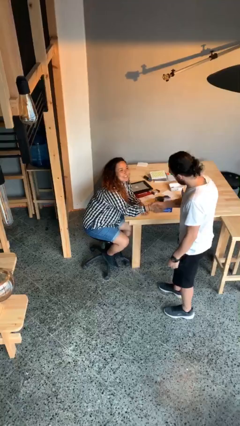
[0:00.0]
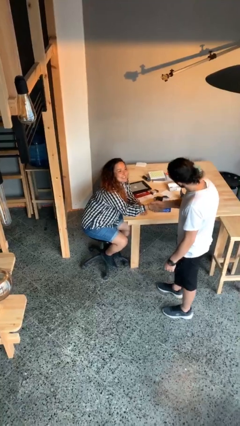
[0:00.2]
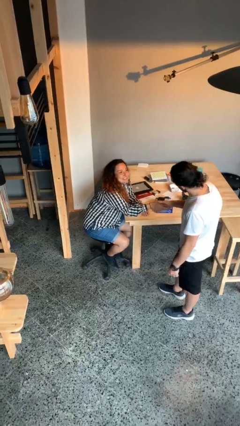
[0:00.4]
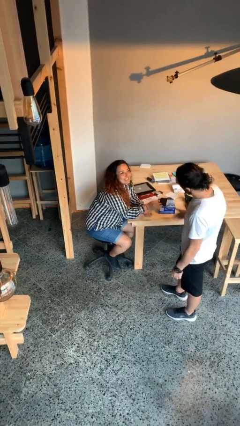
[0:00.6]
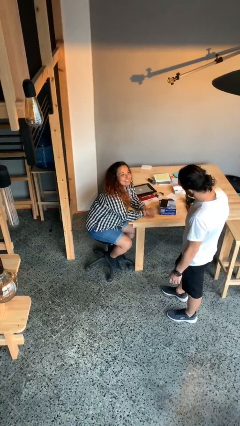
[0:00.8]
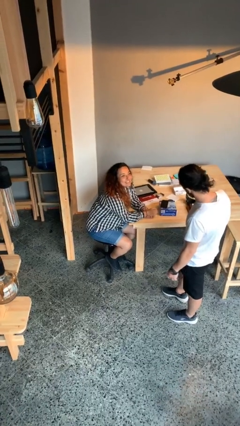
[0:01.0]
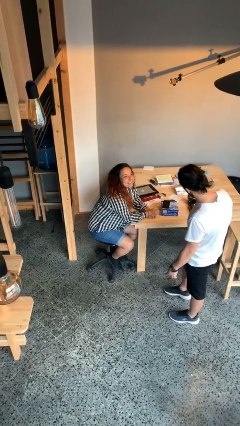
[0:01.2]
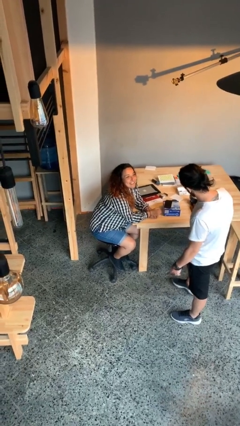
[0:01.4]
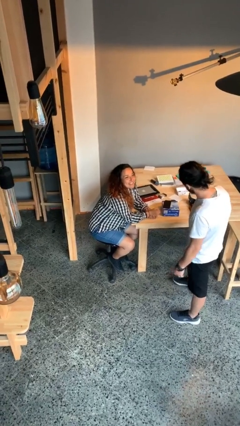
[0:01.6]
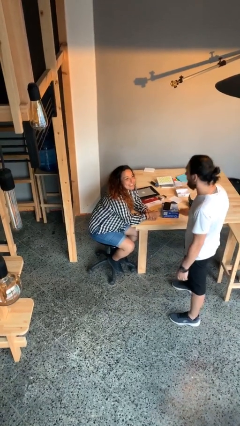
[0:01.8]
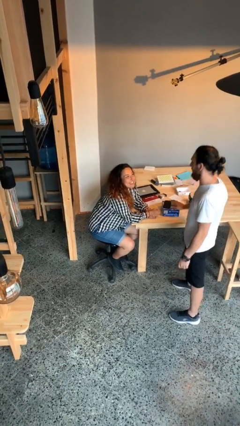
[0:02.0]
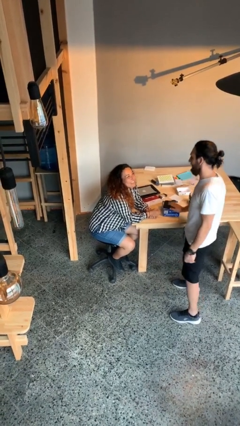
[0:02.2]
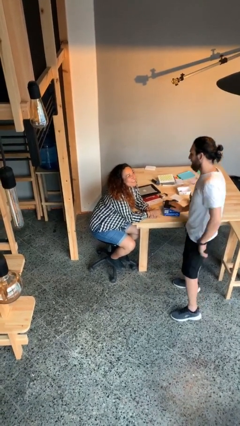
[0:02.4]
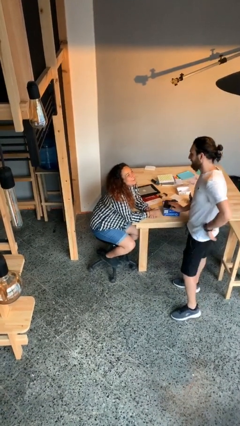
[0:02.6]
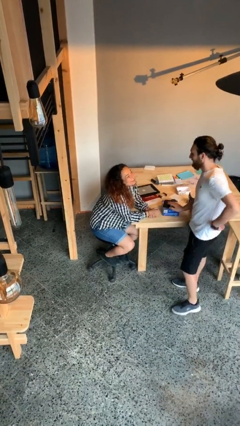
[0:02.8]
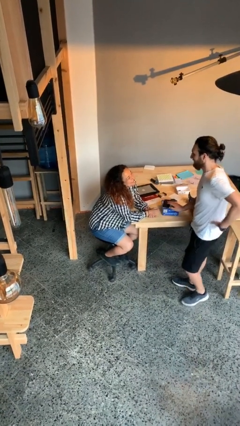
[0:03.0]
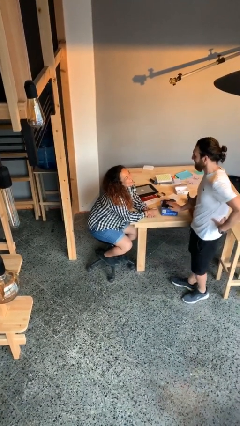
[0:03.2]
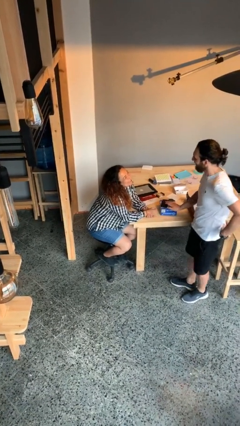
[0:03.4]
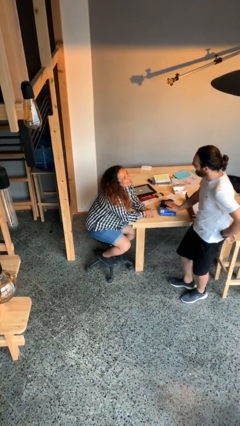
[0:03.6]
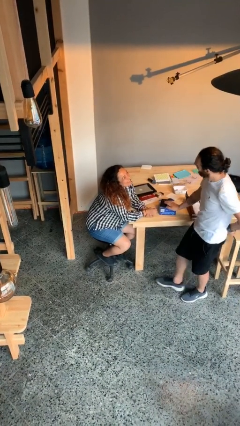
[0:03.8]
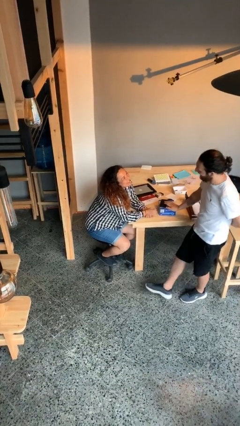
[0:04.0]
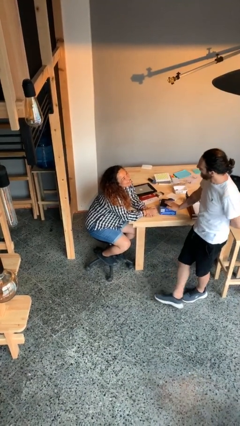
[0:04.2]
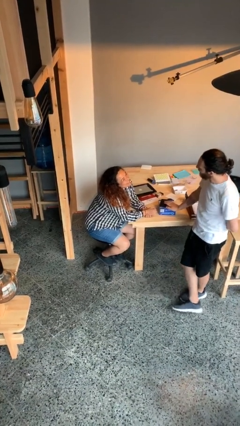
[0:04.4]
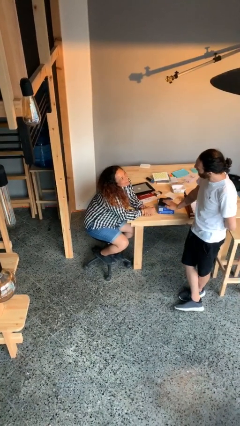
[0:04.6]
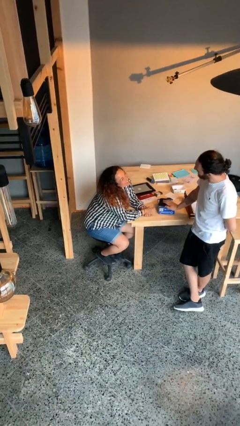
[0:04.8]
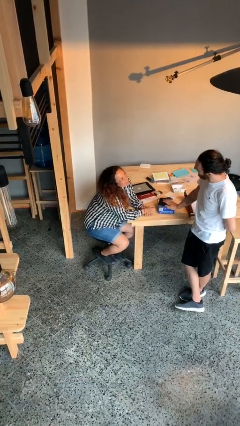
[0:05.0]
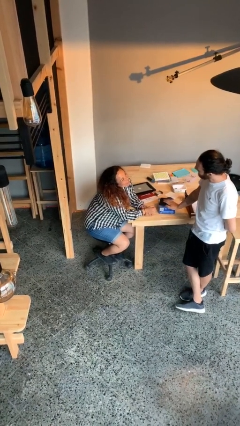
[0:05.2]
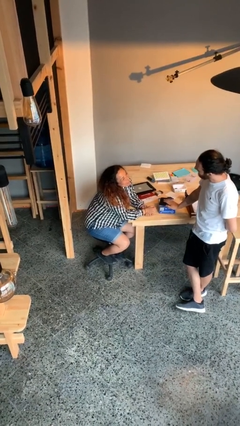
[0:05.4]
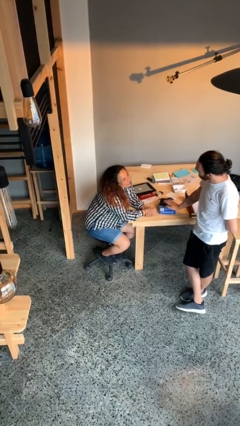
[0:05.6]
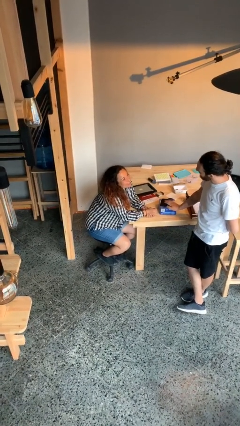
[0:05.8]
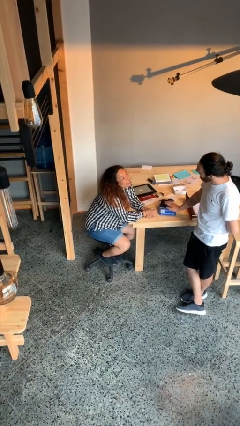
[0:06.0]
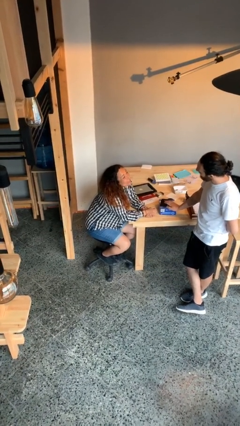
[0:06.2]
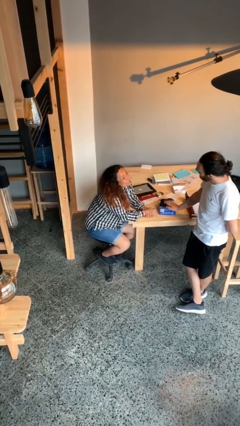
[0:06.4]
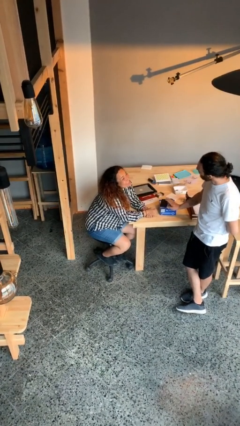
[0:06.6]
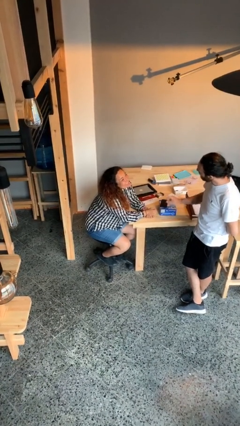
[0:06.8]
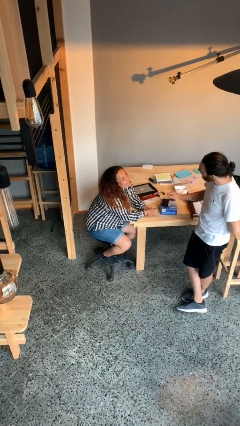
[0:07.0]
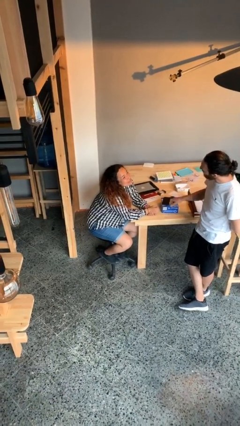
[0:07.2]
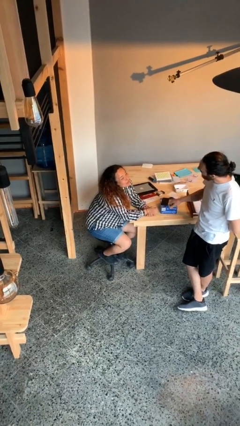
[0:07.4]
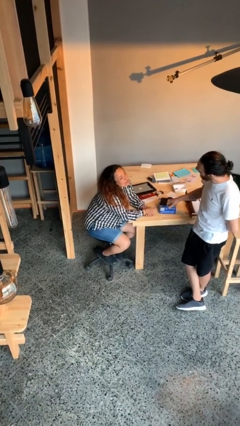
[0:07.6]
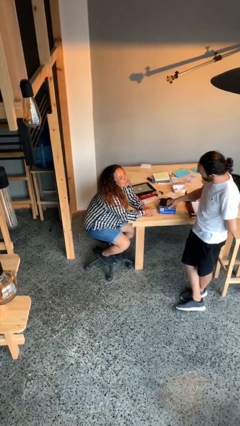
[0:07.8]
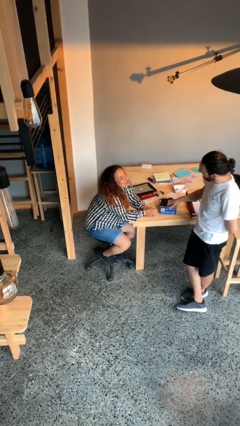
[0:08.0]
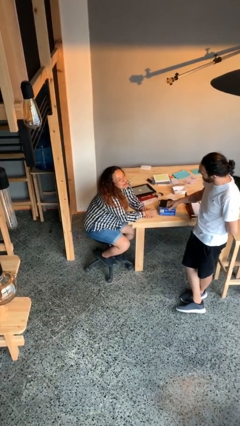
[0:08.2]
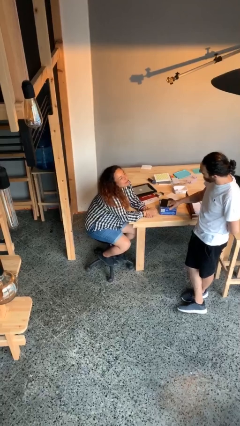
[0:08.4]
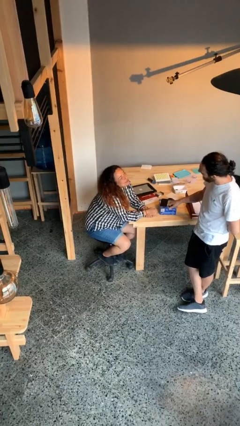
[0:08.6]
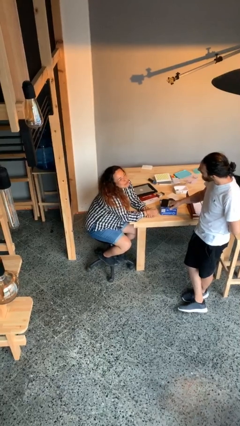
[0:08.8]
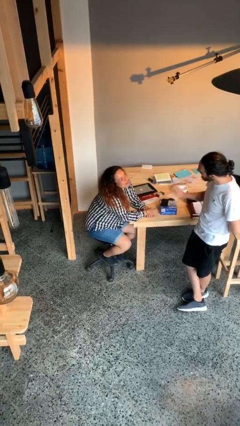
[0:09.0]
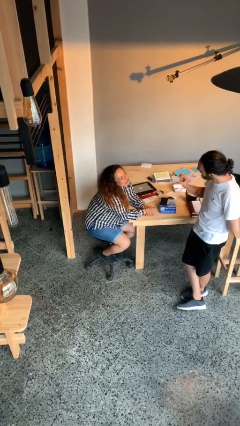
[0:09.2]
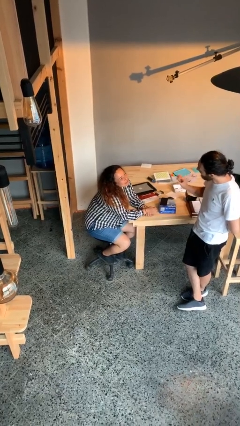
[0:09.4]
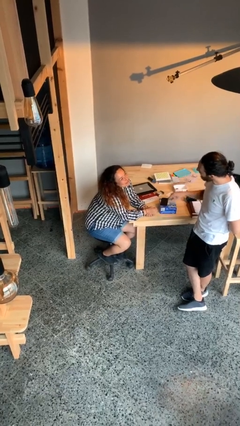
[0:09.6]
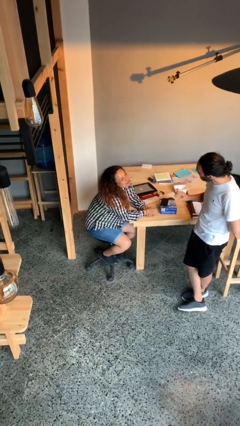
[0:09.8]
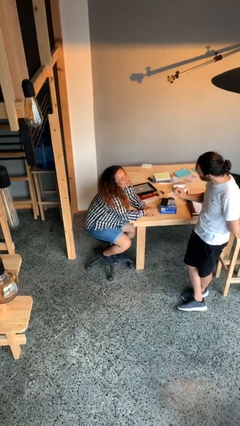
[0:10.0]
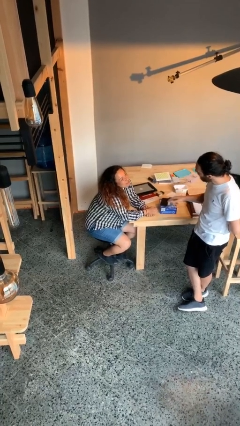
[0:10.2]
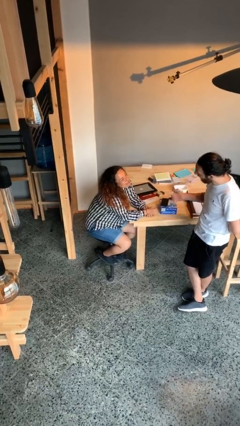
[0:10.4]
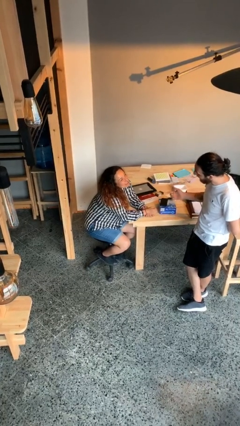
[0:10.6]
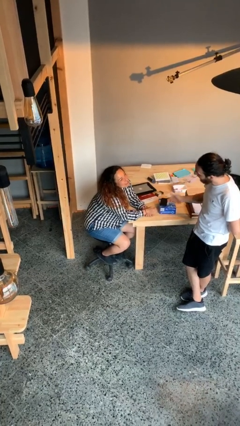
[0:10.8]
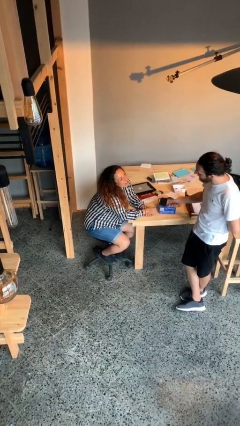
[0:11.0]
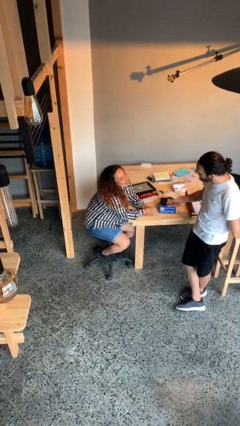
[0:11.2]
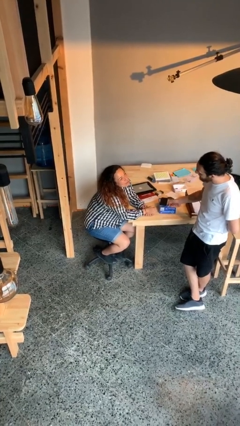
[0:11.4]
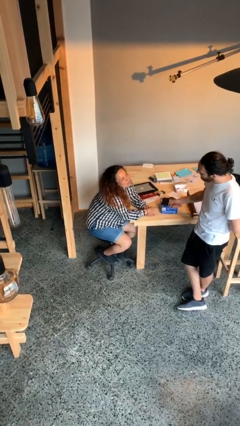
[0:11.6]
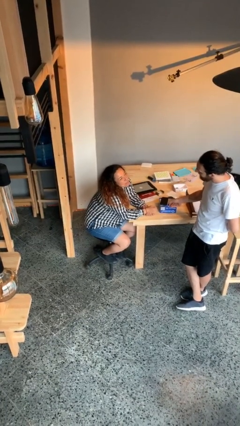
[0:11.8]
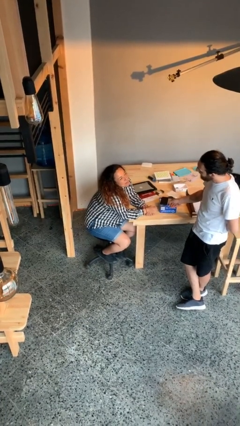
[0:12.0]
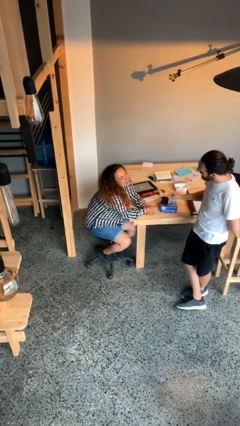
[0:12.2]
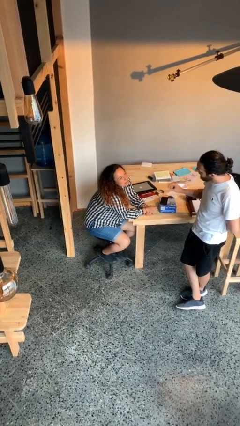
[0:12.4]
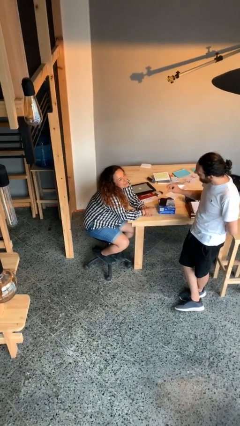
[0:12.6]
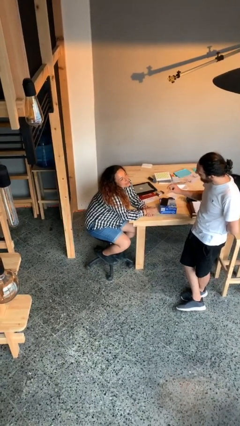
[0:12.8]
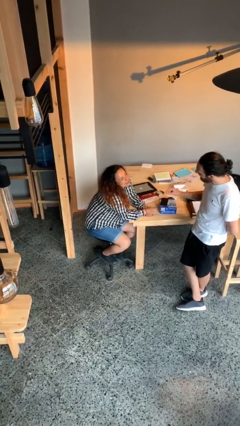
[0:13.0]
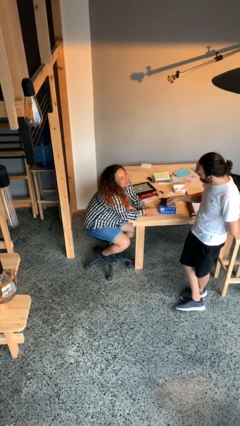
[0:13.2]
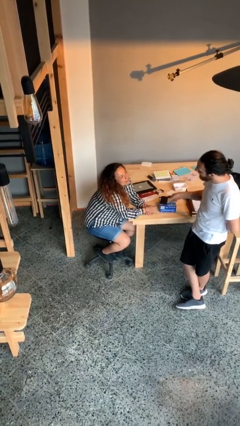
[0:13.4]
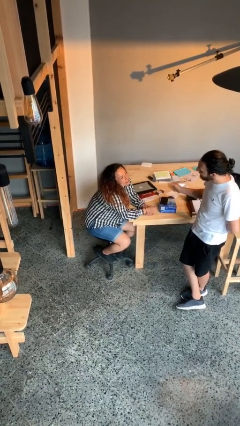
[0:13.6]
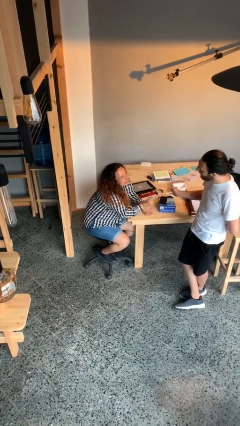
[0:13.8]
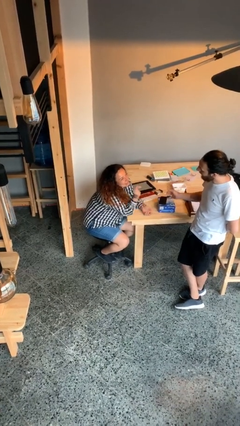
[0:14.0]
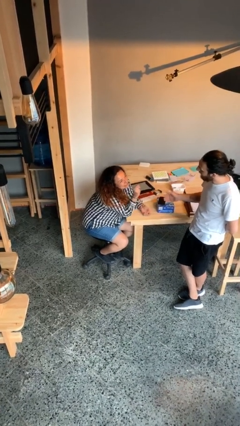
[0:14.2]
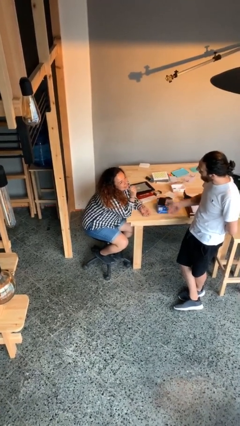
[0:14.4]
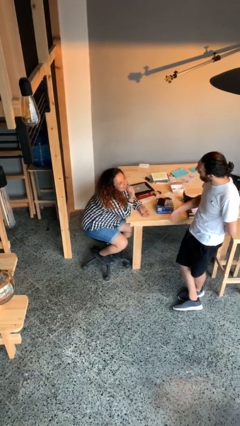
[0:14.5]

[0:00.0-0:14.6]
person talks to person

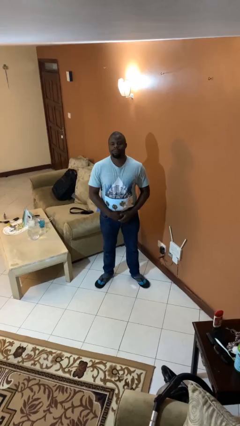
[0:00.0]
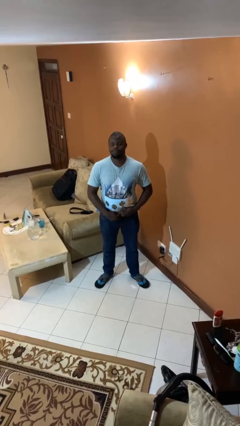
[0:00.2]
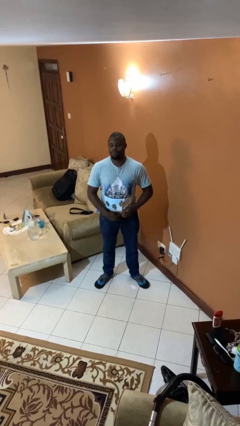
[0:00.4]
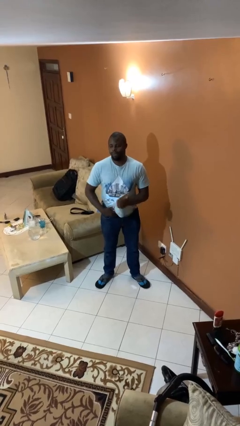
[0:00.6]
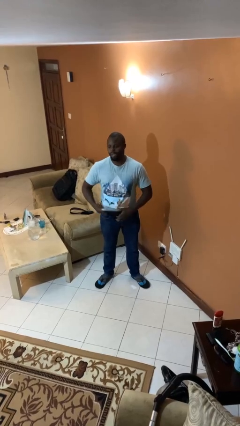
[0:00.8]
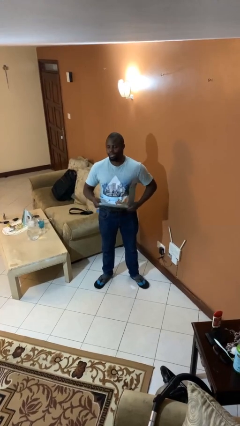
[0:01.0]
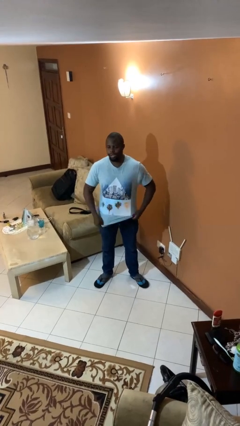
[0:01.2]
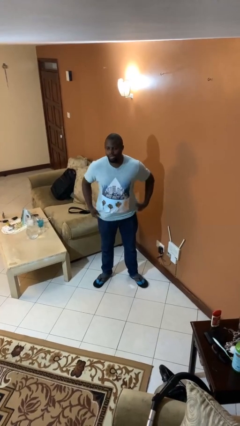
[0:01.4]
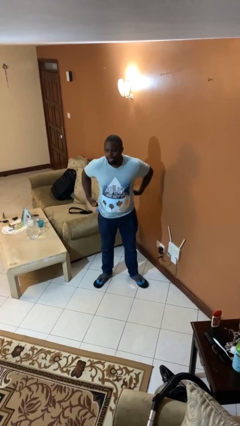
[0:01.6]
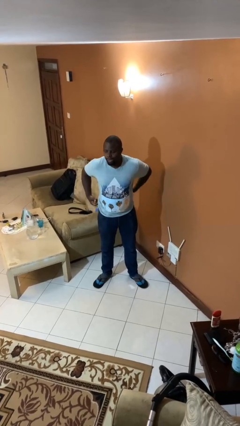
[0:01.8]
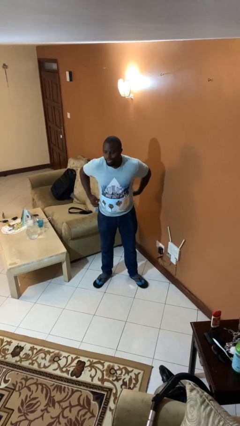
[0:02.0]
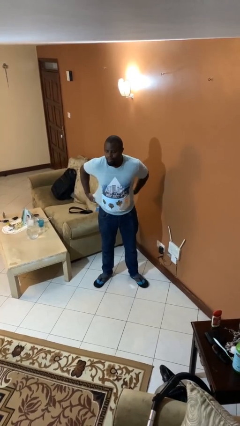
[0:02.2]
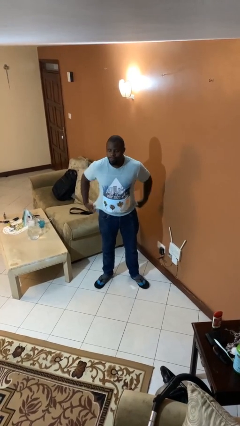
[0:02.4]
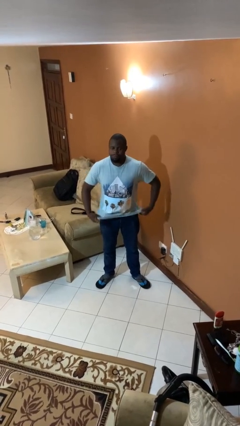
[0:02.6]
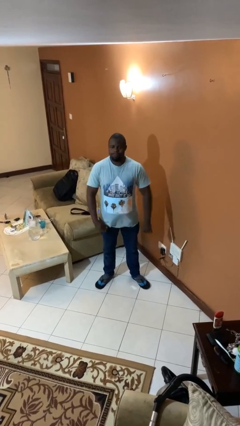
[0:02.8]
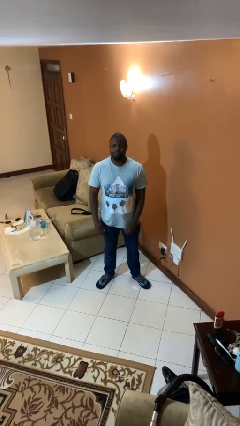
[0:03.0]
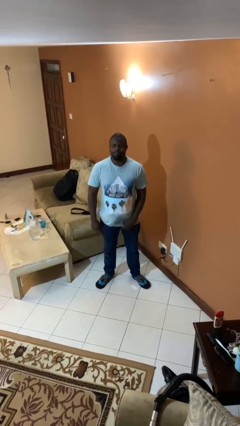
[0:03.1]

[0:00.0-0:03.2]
person untucks shirt

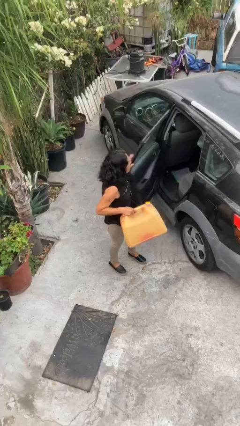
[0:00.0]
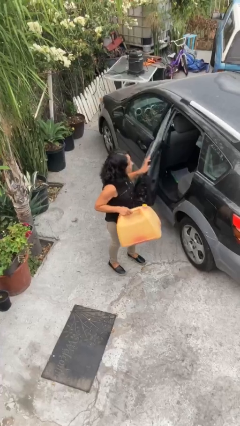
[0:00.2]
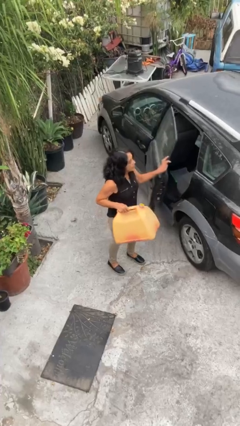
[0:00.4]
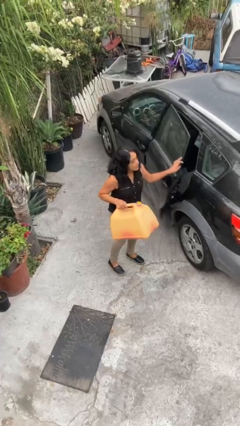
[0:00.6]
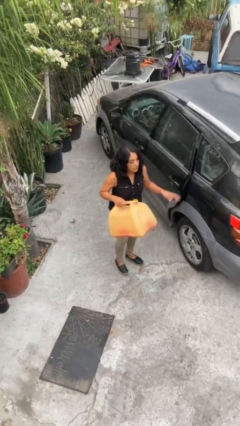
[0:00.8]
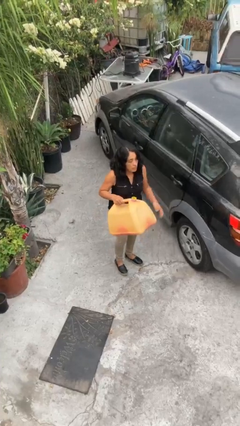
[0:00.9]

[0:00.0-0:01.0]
person closes car door
